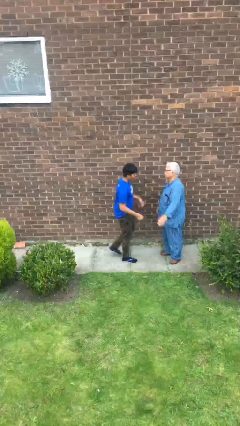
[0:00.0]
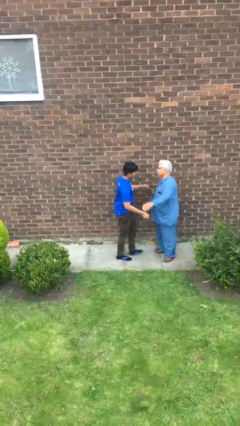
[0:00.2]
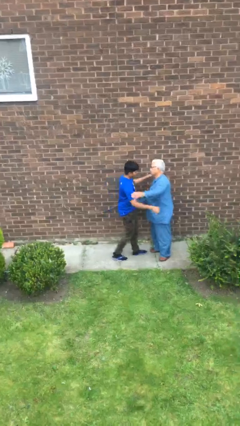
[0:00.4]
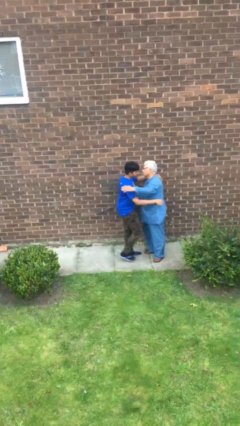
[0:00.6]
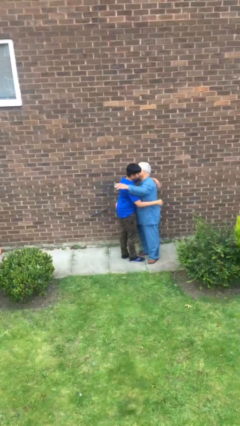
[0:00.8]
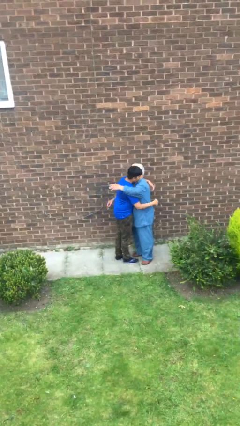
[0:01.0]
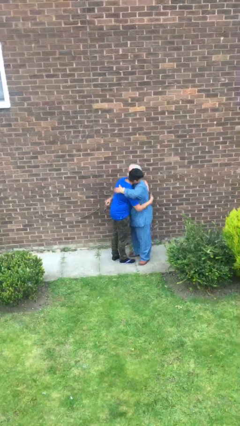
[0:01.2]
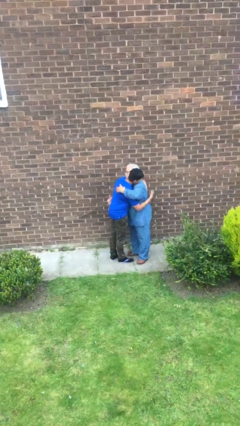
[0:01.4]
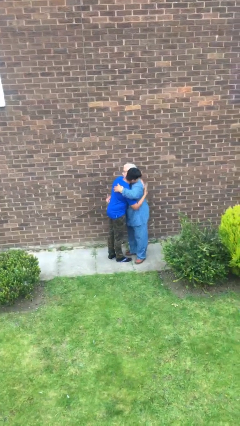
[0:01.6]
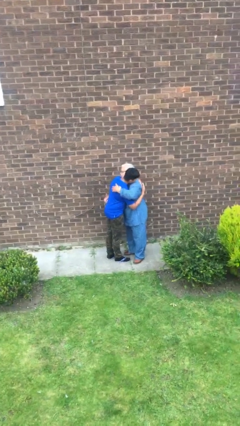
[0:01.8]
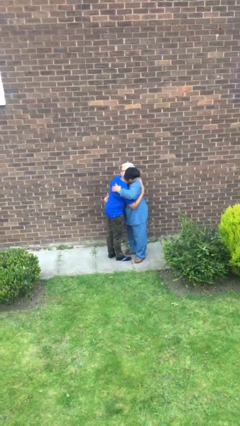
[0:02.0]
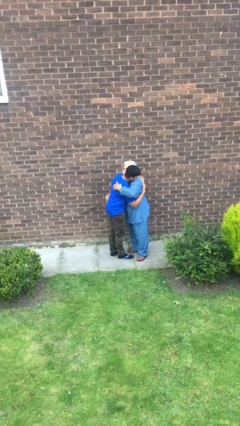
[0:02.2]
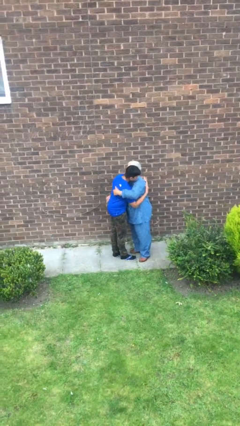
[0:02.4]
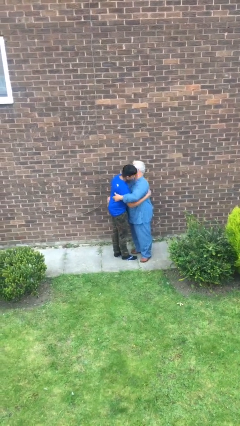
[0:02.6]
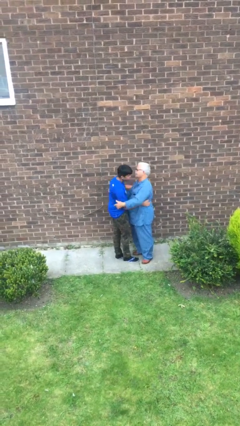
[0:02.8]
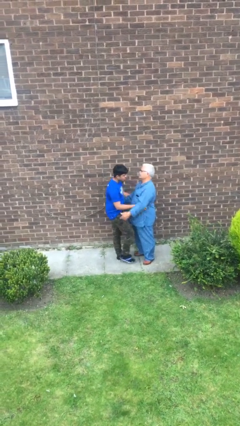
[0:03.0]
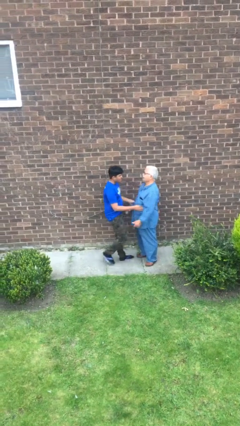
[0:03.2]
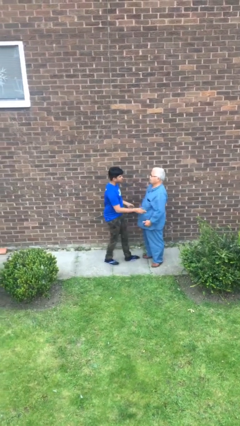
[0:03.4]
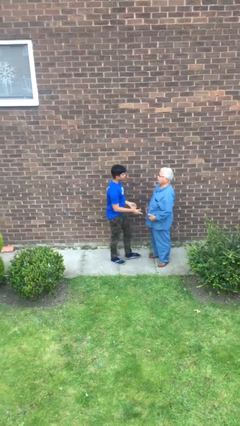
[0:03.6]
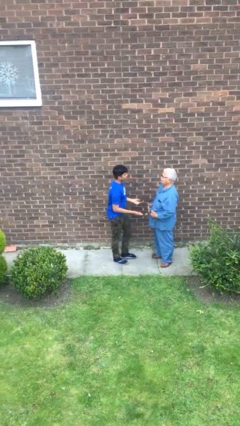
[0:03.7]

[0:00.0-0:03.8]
person embraces person

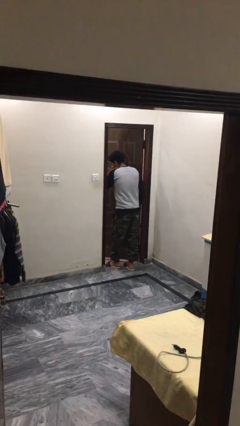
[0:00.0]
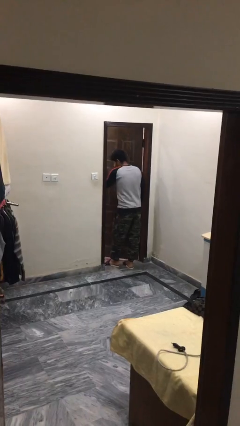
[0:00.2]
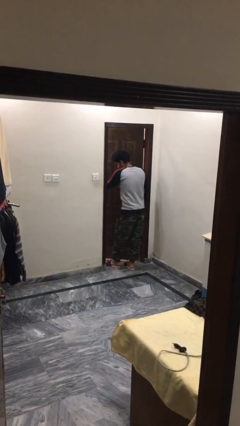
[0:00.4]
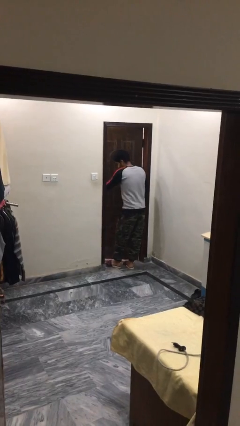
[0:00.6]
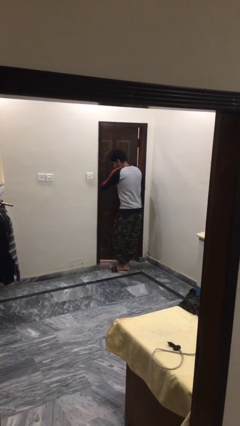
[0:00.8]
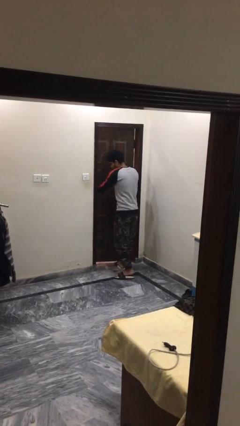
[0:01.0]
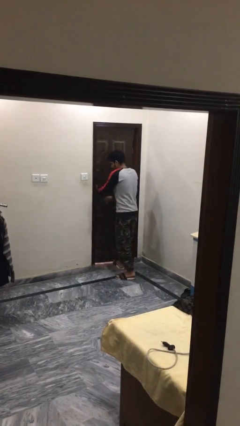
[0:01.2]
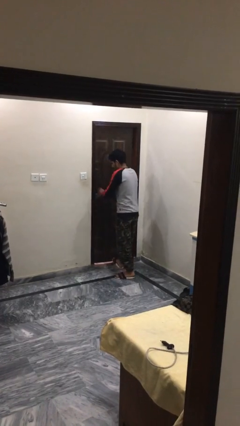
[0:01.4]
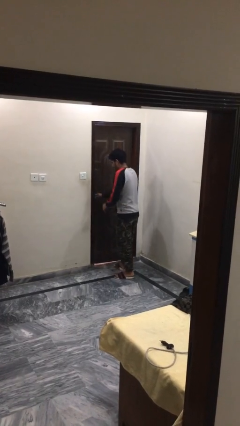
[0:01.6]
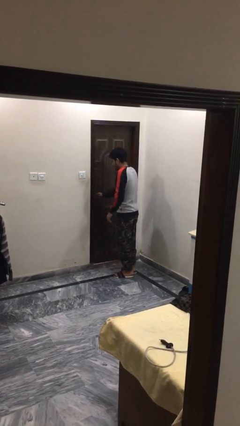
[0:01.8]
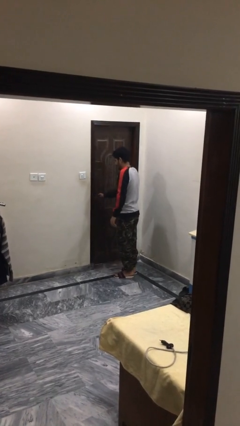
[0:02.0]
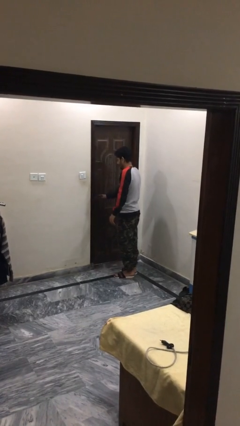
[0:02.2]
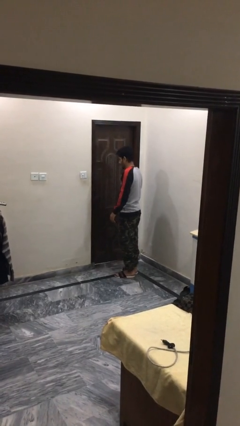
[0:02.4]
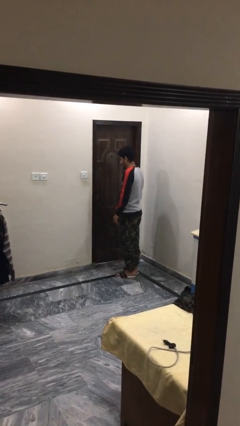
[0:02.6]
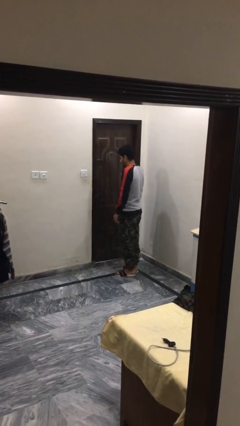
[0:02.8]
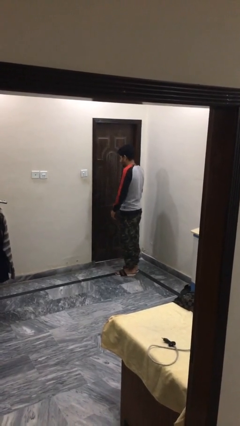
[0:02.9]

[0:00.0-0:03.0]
person closes facility door

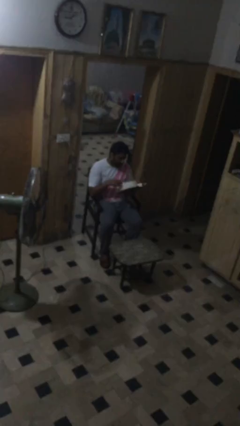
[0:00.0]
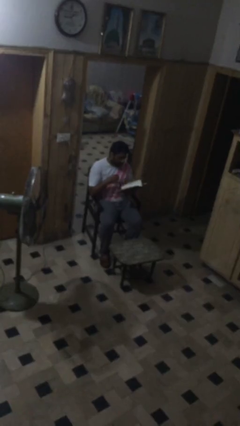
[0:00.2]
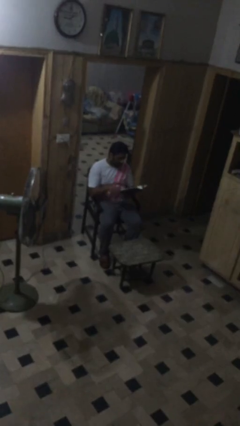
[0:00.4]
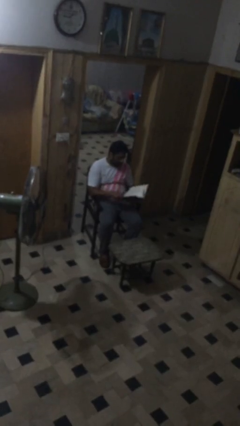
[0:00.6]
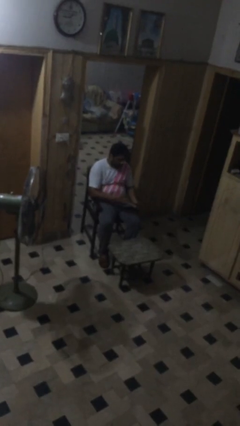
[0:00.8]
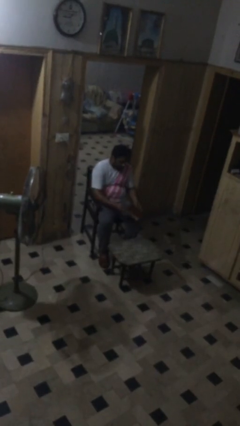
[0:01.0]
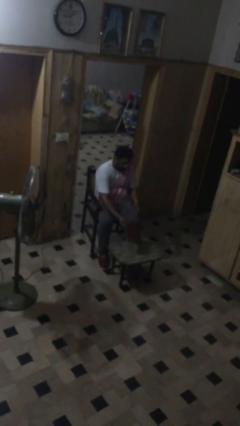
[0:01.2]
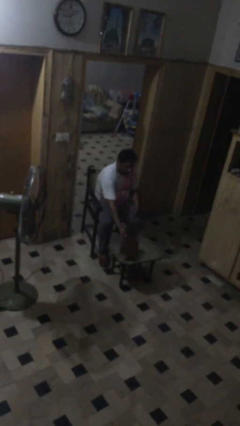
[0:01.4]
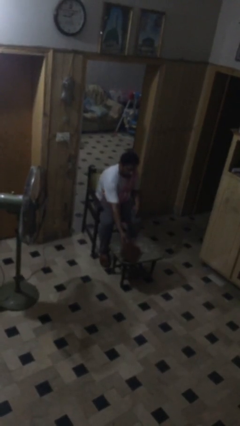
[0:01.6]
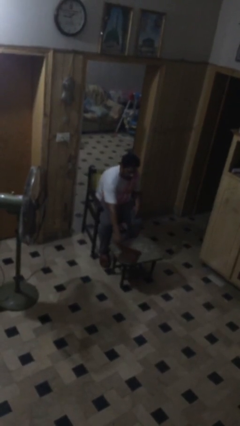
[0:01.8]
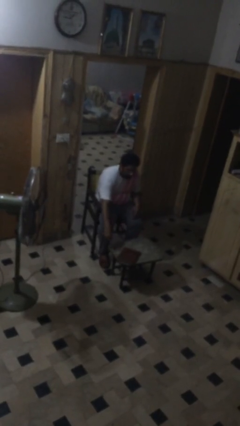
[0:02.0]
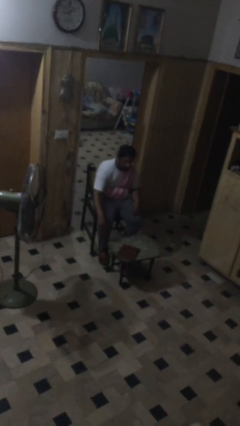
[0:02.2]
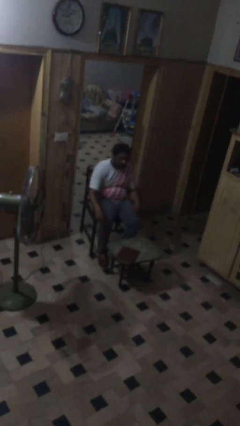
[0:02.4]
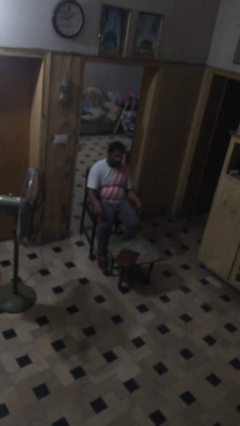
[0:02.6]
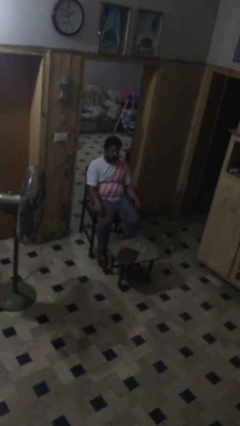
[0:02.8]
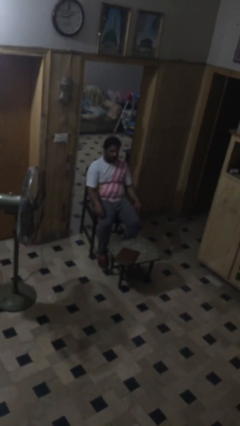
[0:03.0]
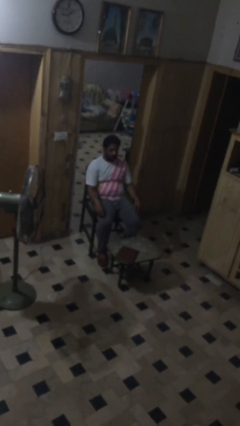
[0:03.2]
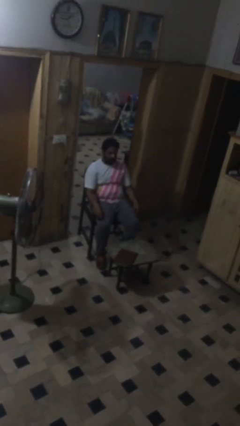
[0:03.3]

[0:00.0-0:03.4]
person puts down object on table

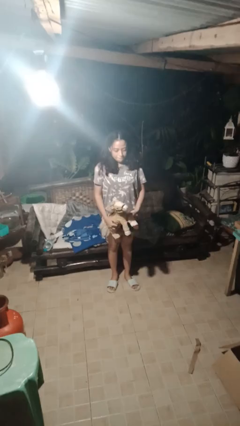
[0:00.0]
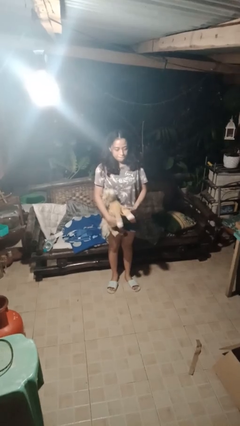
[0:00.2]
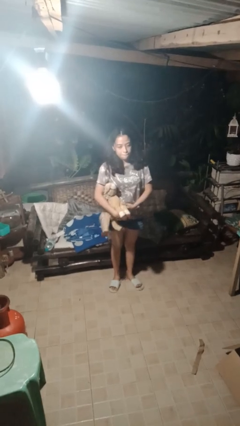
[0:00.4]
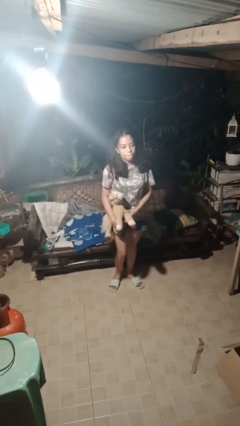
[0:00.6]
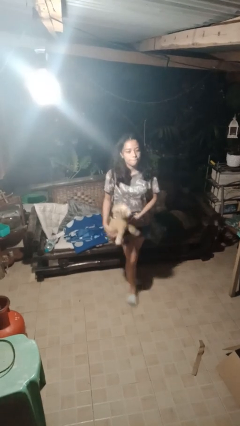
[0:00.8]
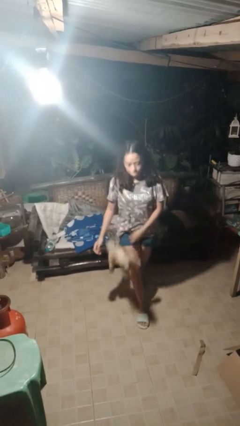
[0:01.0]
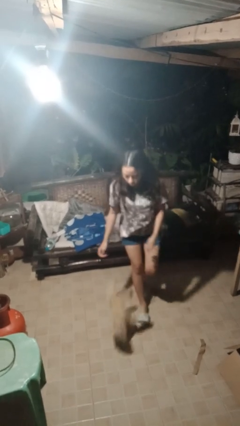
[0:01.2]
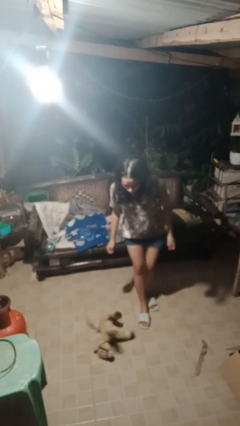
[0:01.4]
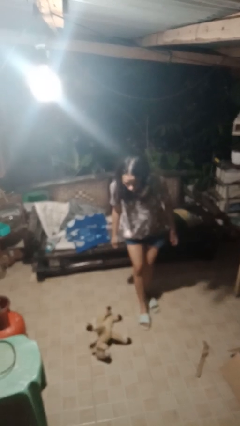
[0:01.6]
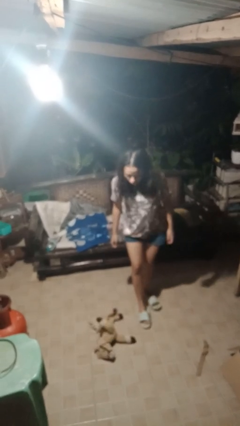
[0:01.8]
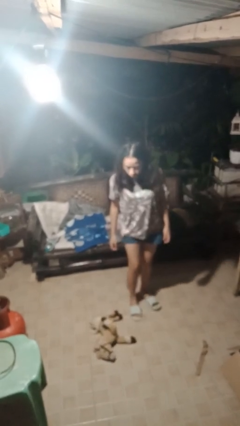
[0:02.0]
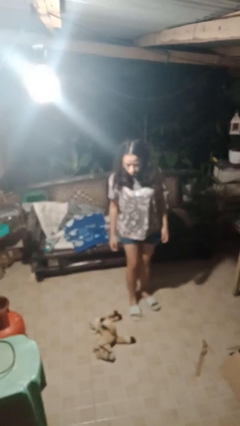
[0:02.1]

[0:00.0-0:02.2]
person drops object

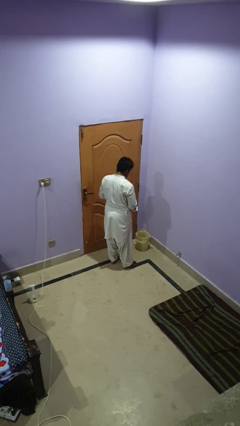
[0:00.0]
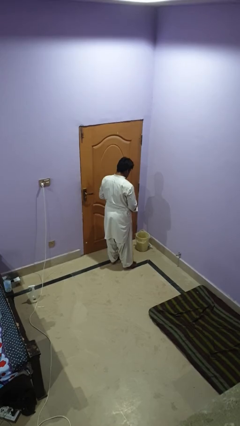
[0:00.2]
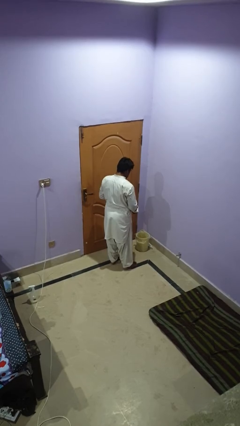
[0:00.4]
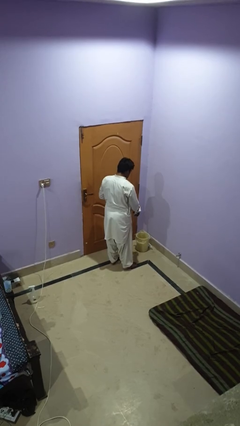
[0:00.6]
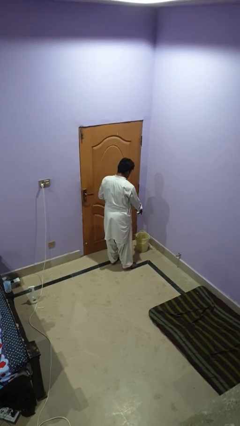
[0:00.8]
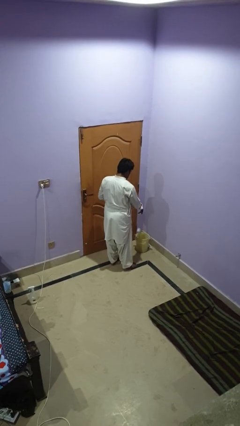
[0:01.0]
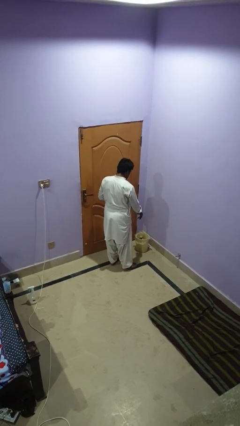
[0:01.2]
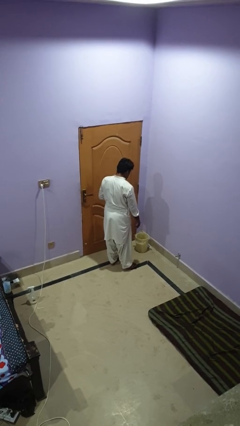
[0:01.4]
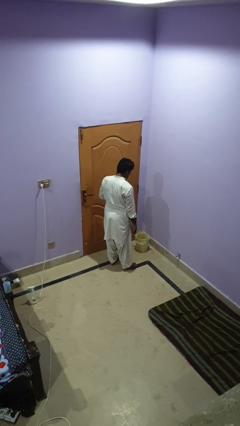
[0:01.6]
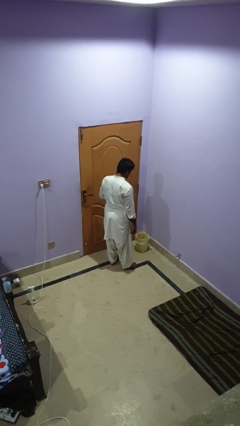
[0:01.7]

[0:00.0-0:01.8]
person discards trash

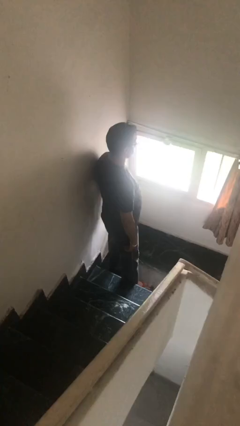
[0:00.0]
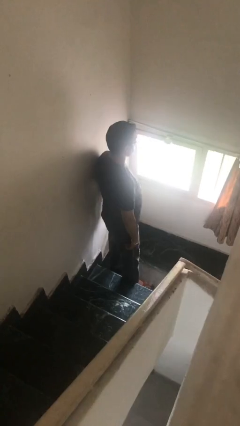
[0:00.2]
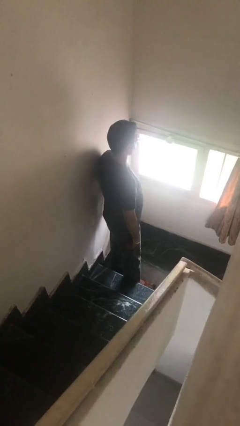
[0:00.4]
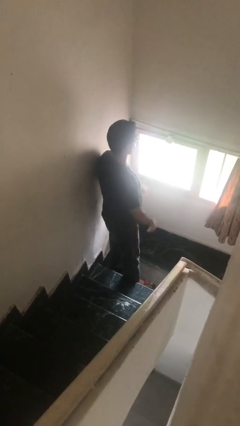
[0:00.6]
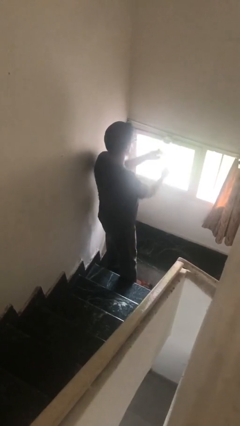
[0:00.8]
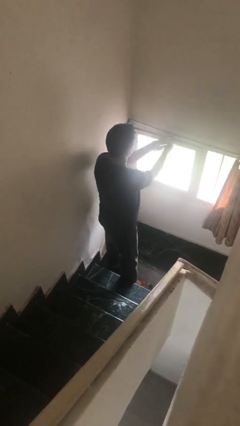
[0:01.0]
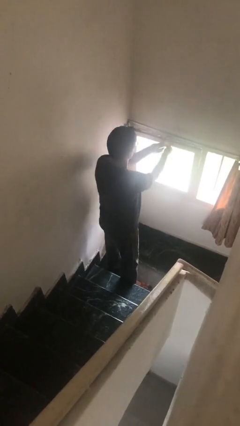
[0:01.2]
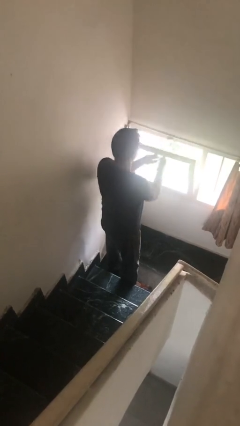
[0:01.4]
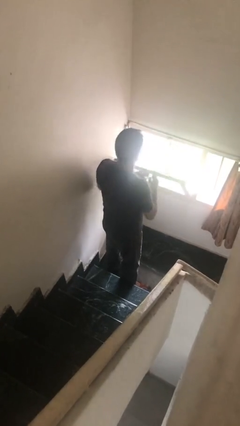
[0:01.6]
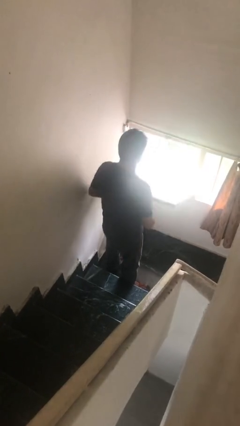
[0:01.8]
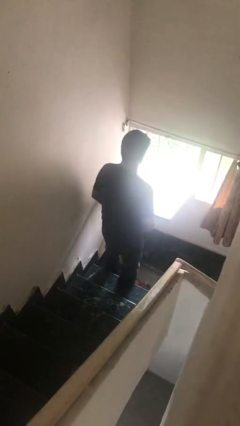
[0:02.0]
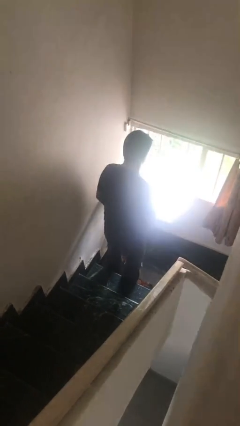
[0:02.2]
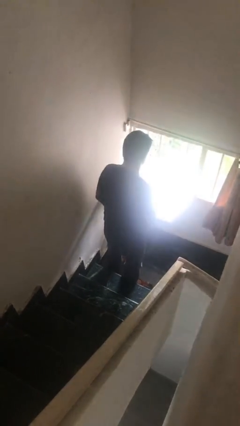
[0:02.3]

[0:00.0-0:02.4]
person opens home window

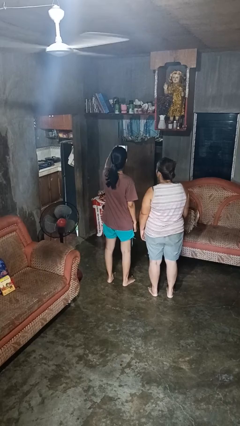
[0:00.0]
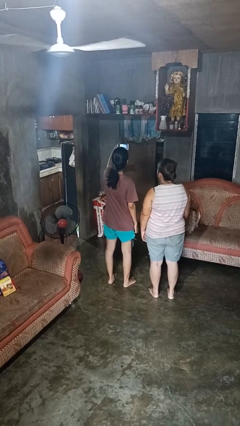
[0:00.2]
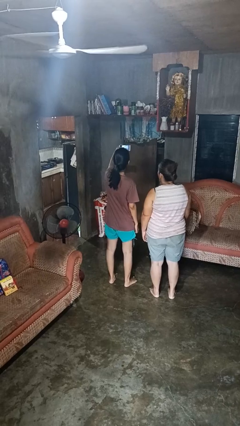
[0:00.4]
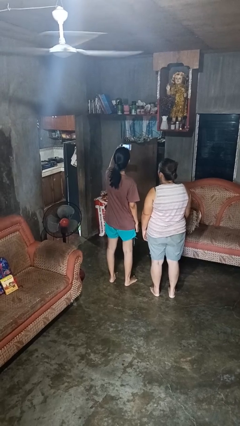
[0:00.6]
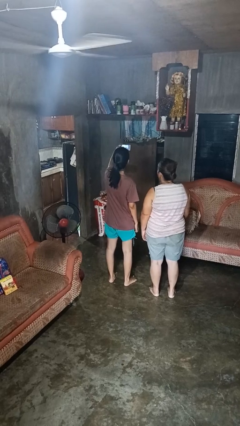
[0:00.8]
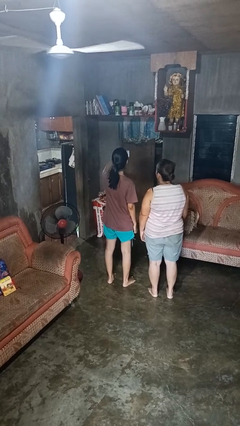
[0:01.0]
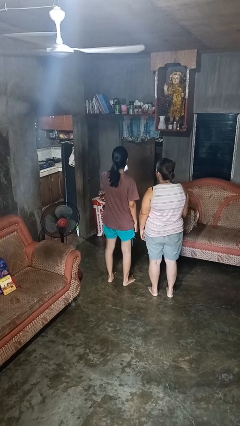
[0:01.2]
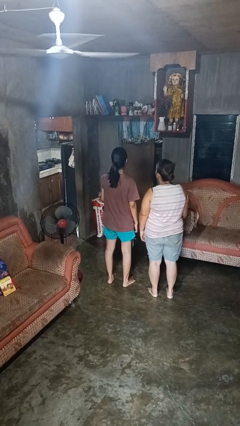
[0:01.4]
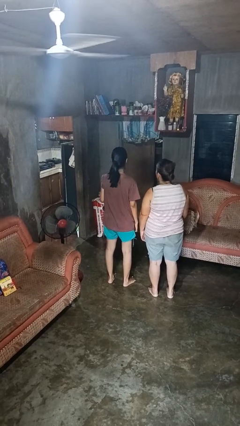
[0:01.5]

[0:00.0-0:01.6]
person takes selfie with person
